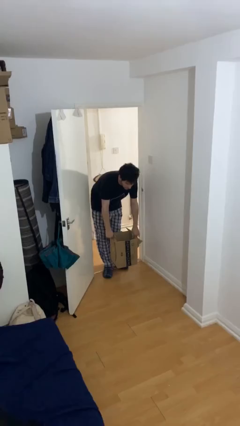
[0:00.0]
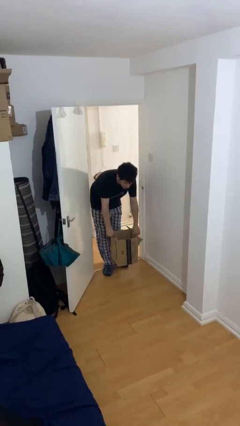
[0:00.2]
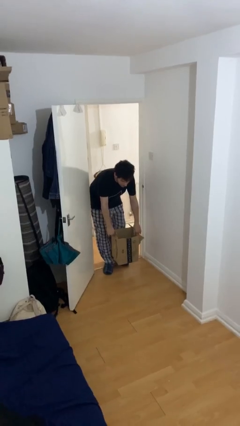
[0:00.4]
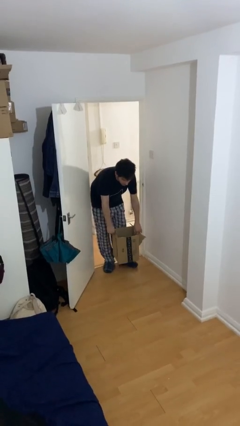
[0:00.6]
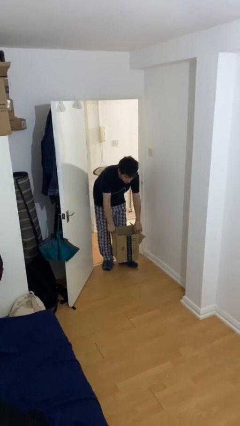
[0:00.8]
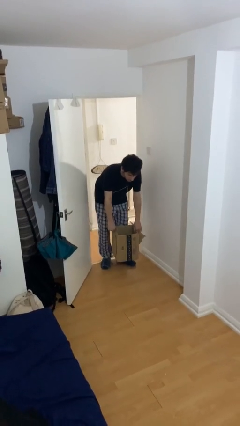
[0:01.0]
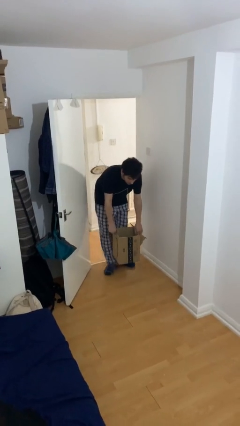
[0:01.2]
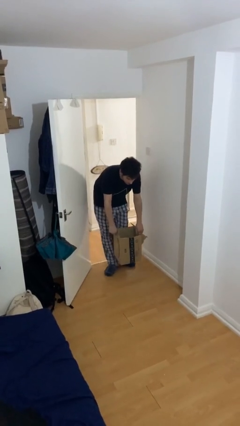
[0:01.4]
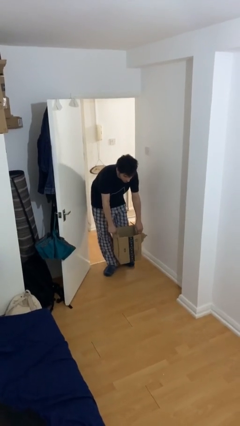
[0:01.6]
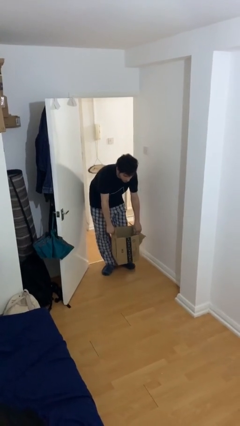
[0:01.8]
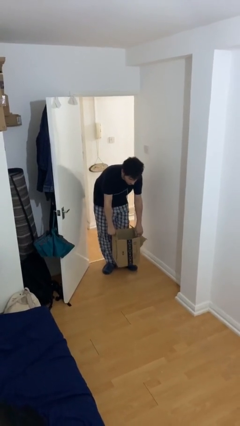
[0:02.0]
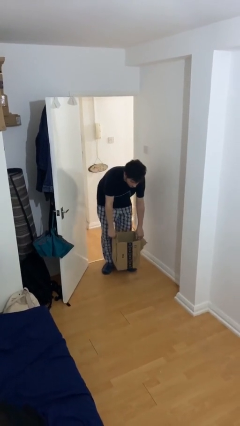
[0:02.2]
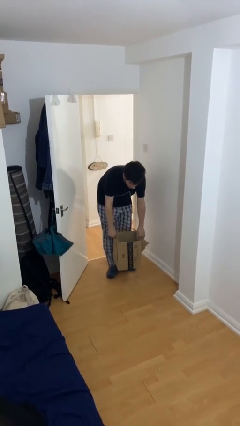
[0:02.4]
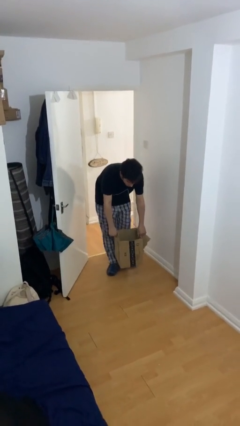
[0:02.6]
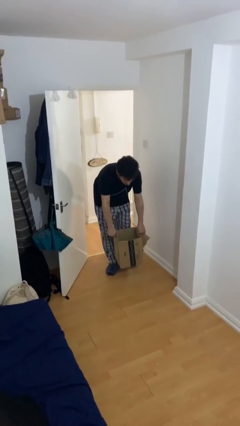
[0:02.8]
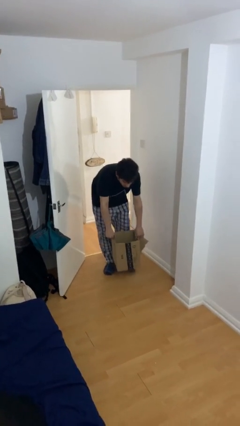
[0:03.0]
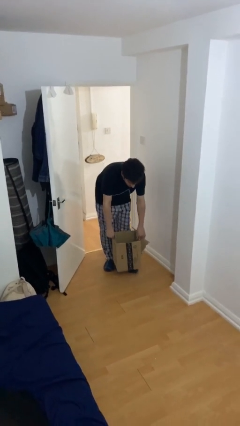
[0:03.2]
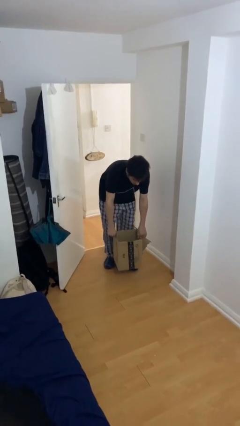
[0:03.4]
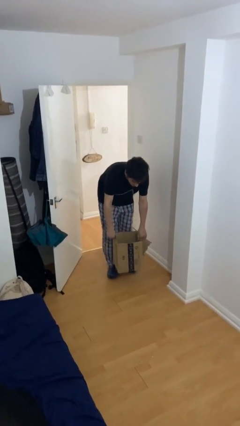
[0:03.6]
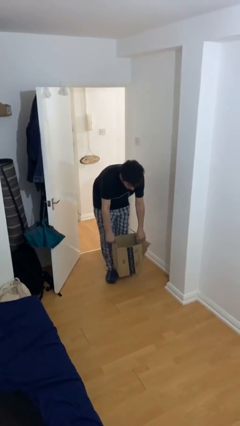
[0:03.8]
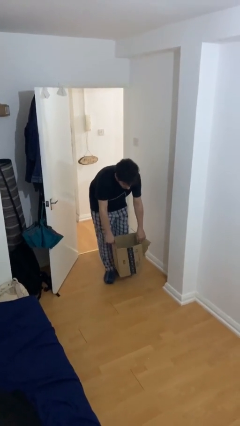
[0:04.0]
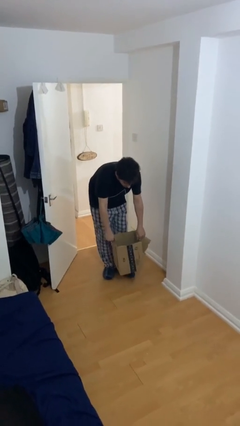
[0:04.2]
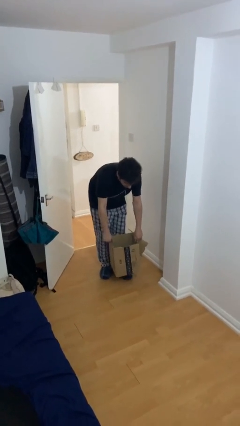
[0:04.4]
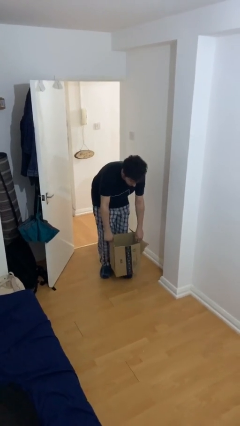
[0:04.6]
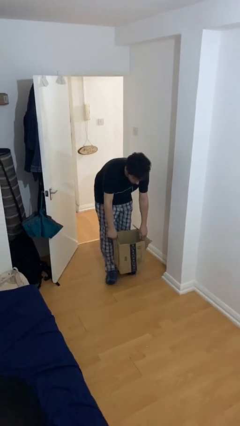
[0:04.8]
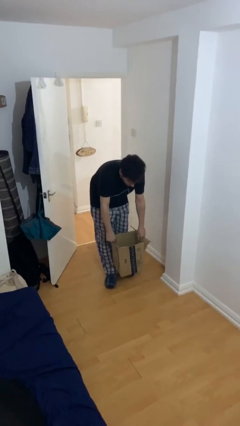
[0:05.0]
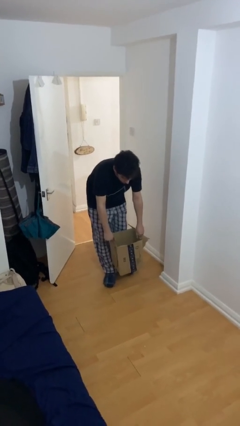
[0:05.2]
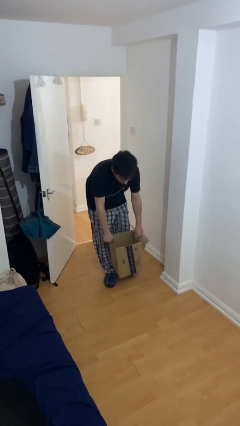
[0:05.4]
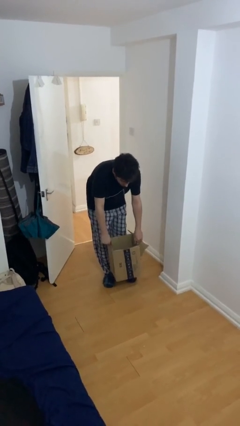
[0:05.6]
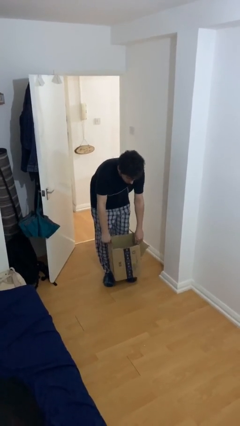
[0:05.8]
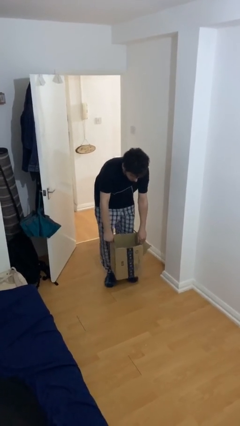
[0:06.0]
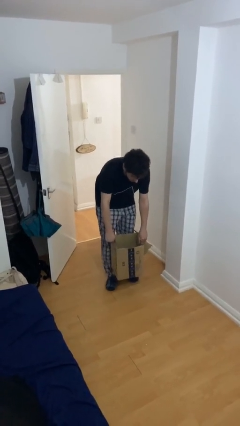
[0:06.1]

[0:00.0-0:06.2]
person carries heavy object

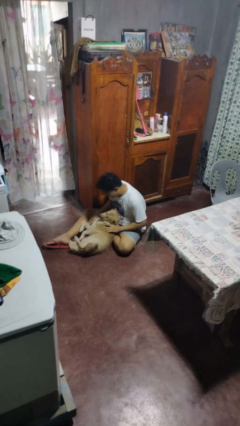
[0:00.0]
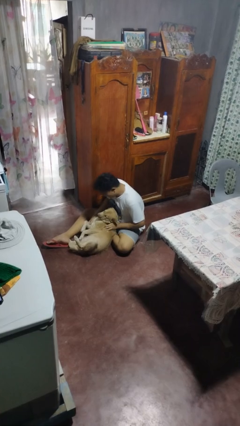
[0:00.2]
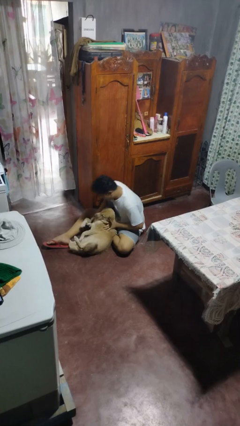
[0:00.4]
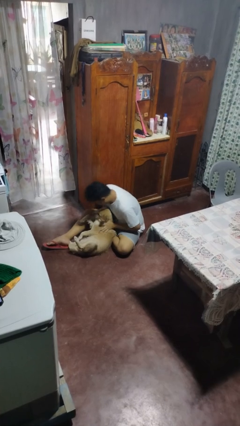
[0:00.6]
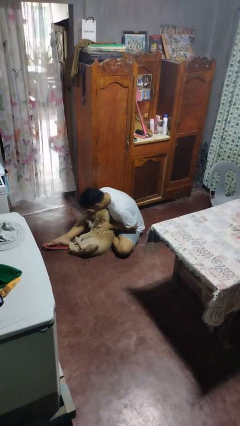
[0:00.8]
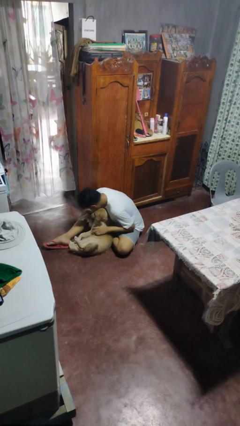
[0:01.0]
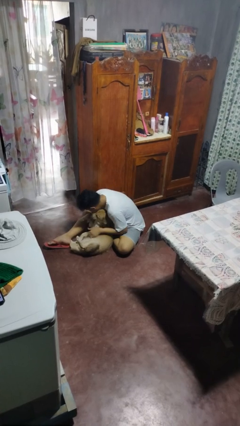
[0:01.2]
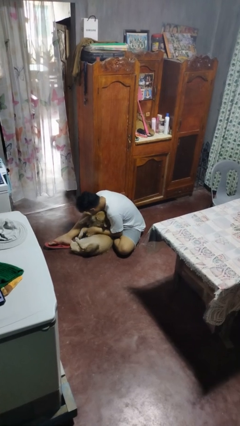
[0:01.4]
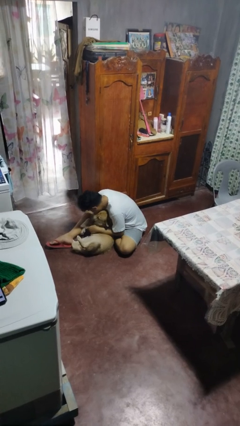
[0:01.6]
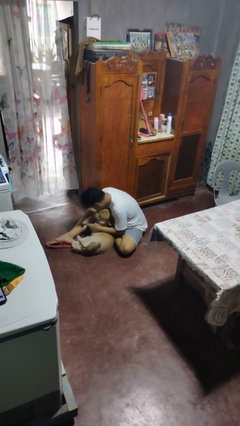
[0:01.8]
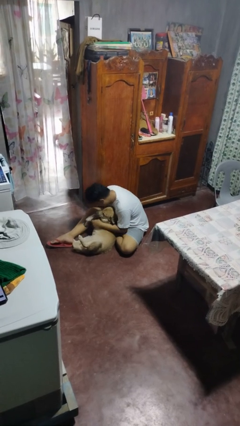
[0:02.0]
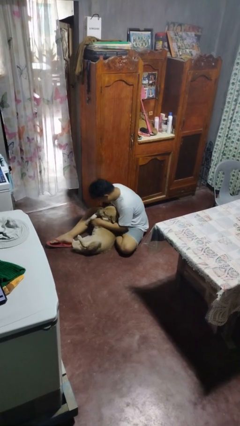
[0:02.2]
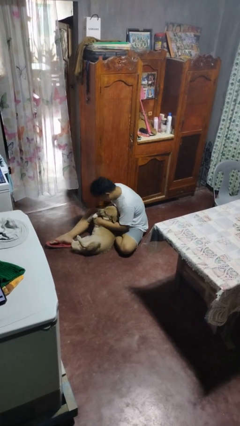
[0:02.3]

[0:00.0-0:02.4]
person hugs dog

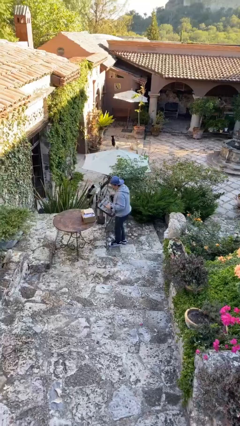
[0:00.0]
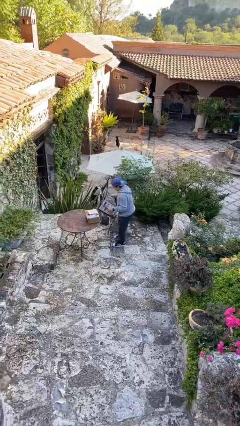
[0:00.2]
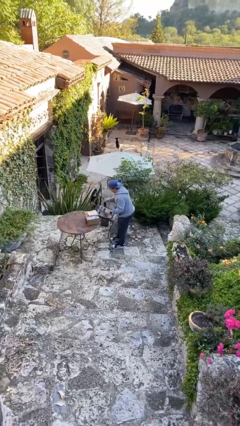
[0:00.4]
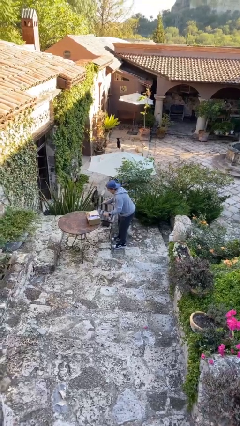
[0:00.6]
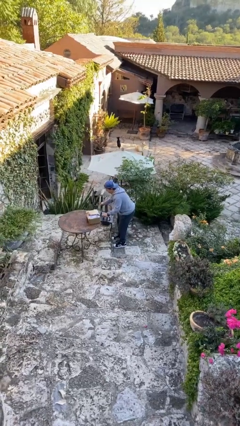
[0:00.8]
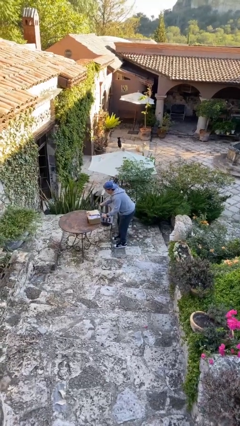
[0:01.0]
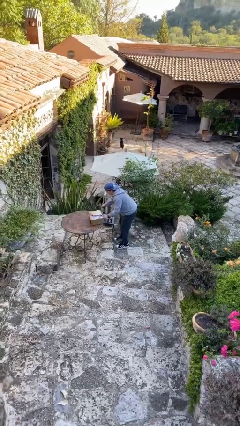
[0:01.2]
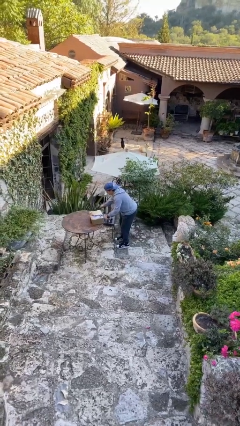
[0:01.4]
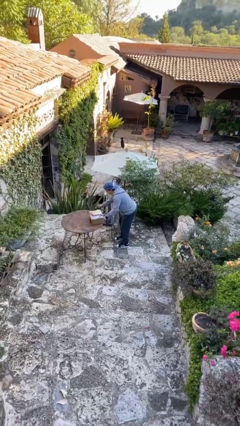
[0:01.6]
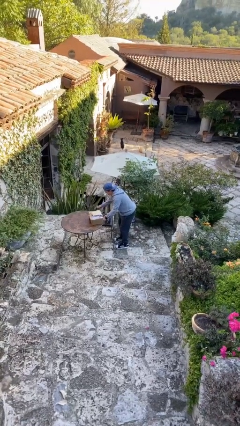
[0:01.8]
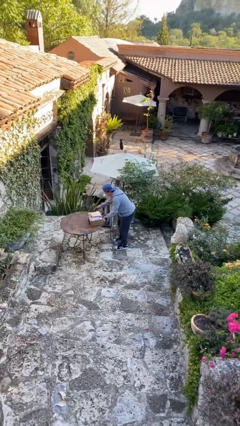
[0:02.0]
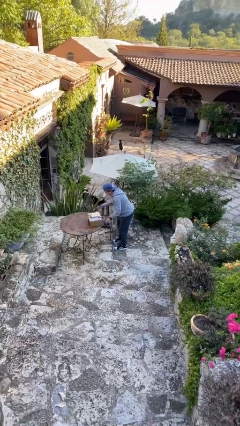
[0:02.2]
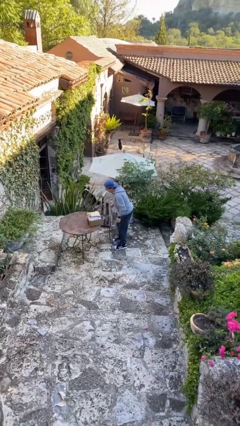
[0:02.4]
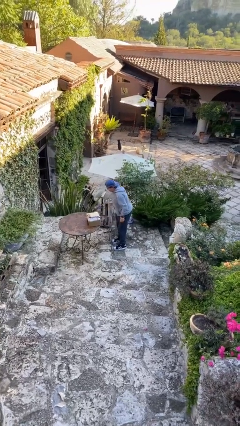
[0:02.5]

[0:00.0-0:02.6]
person puts down object on floor

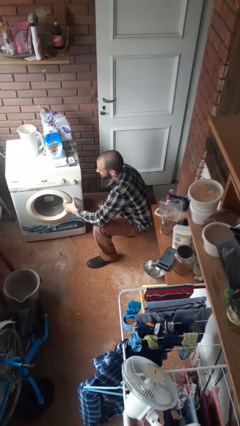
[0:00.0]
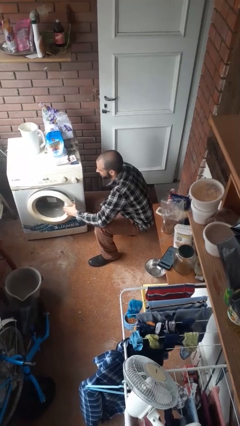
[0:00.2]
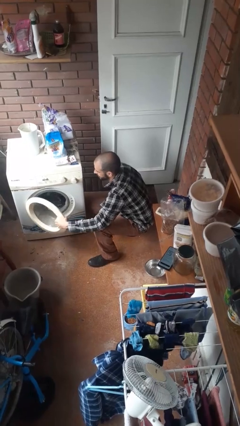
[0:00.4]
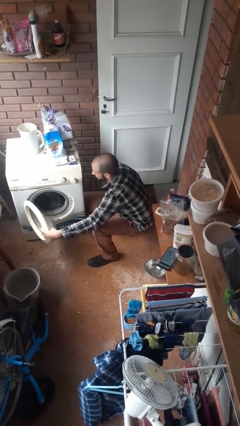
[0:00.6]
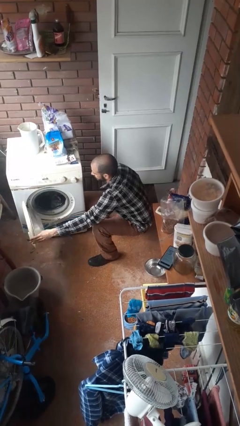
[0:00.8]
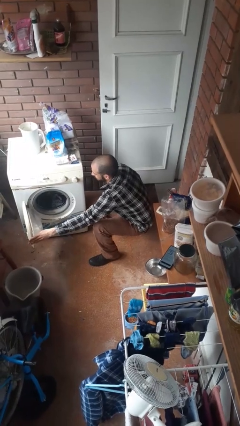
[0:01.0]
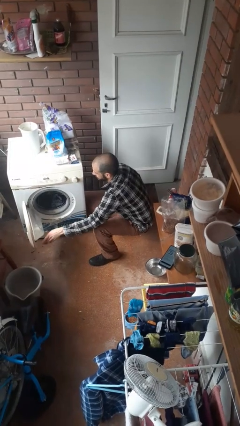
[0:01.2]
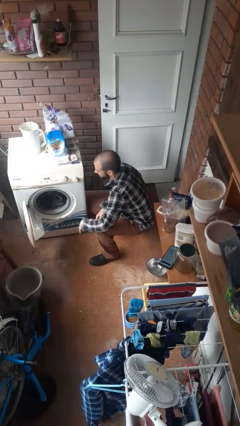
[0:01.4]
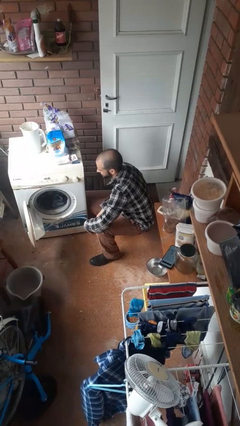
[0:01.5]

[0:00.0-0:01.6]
person opens clothes washer

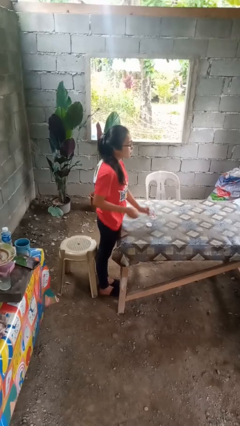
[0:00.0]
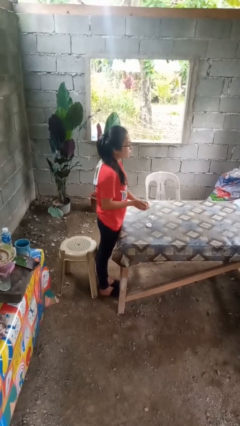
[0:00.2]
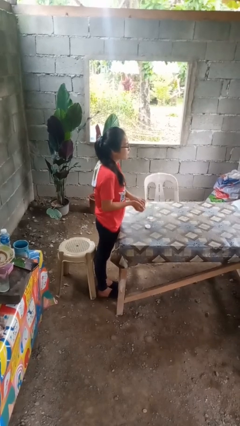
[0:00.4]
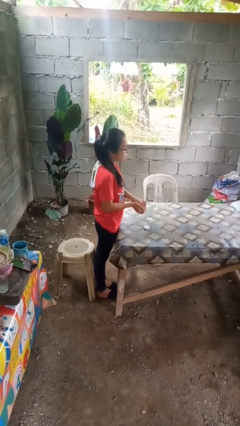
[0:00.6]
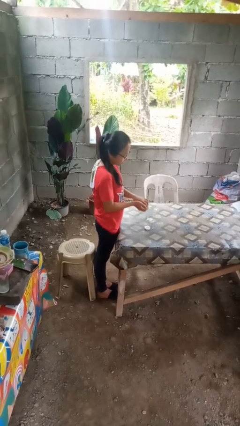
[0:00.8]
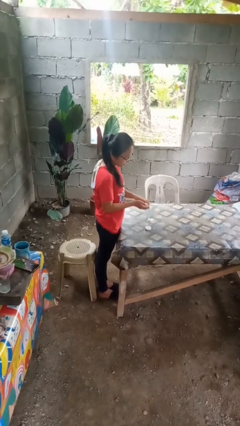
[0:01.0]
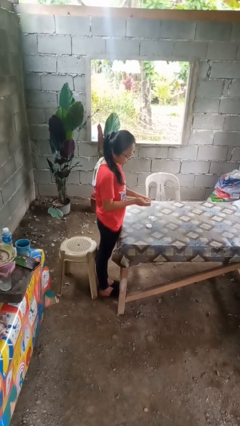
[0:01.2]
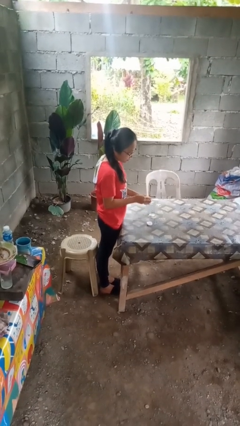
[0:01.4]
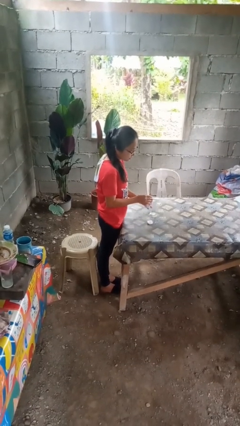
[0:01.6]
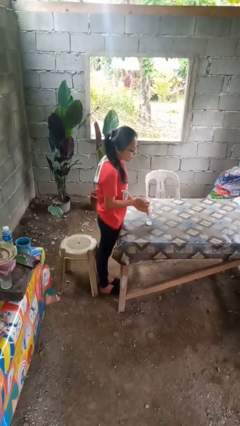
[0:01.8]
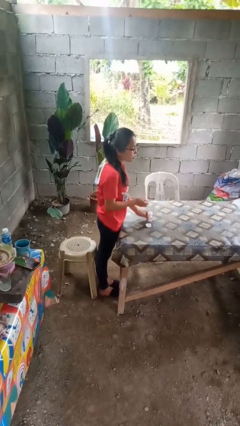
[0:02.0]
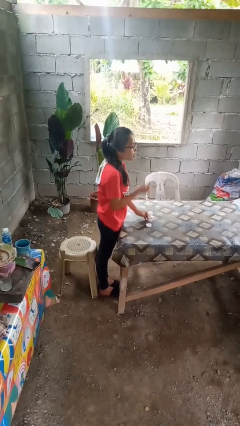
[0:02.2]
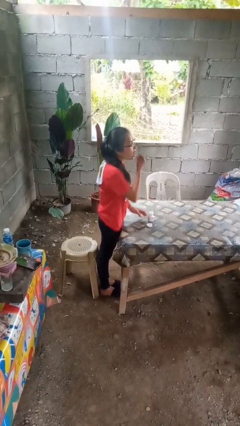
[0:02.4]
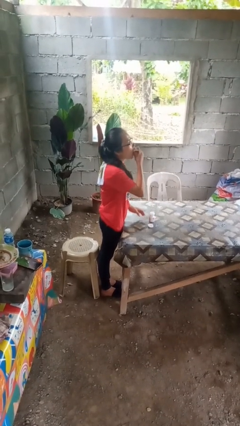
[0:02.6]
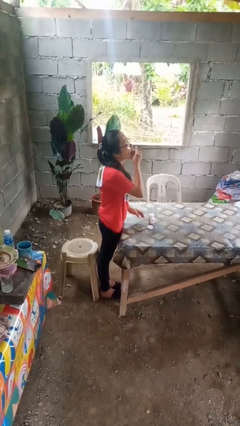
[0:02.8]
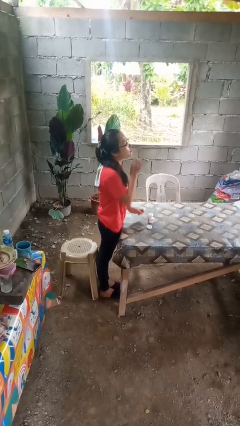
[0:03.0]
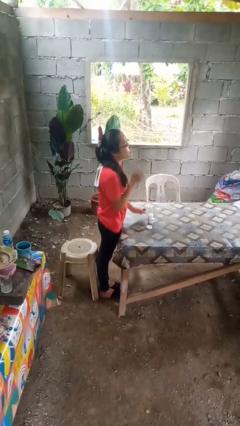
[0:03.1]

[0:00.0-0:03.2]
person takes medicine pills

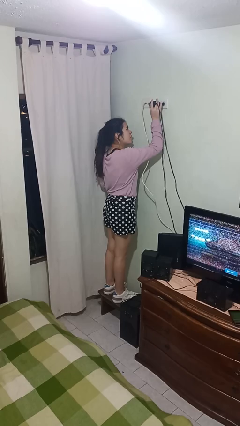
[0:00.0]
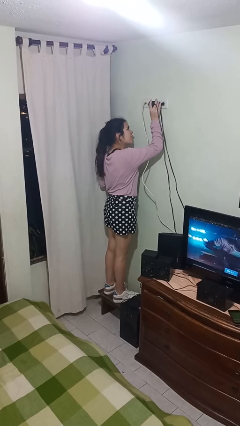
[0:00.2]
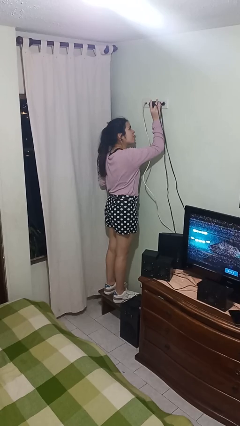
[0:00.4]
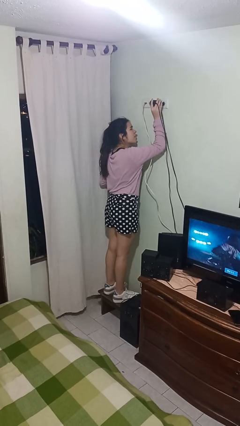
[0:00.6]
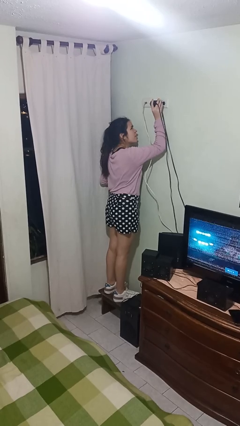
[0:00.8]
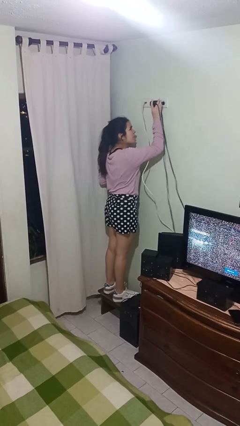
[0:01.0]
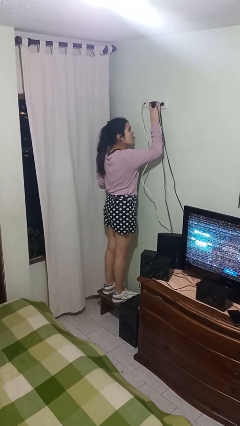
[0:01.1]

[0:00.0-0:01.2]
person plugs into electrical socket

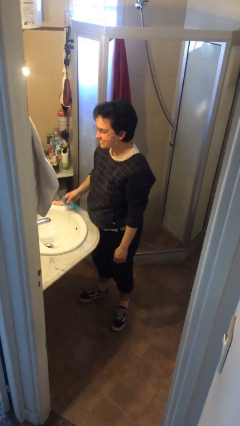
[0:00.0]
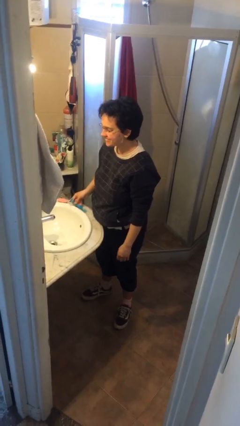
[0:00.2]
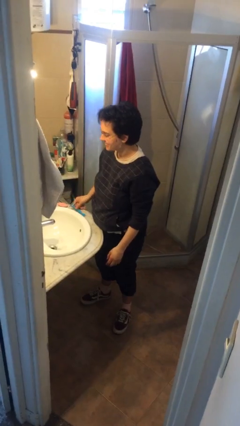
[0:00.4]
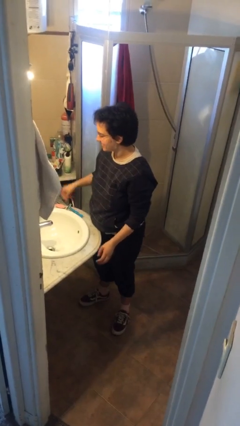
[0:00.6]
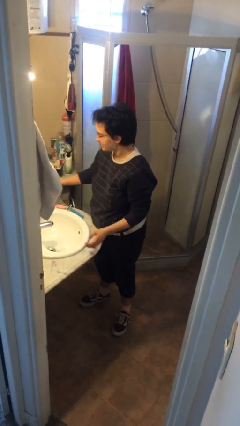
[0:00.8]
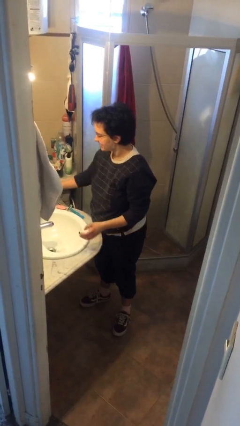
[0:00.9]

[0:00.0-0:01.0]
person shaves face
